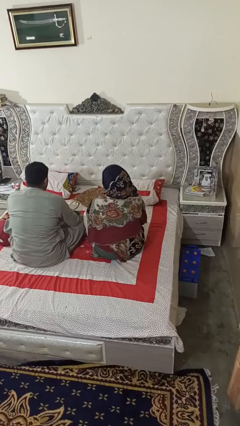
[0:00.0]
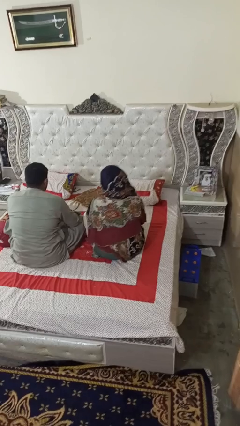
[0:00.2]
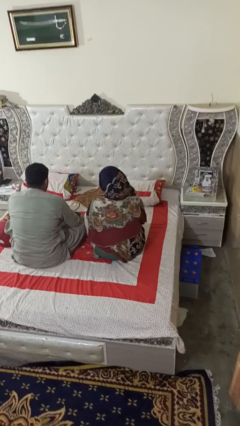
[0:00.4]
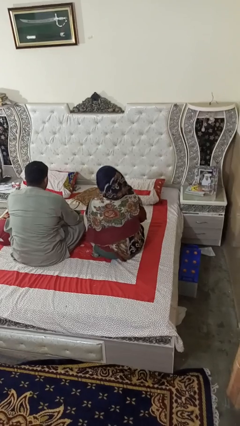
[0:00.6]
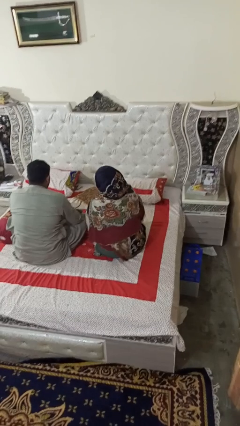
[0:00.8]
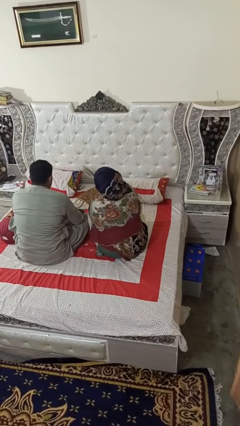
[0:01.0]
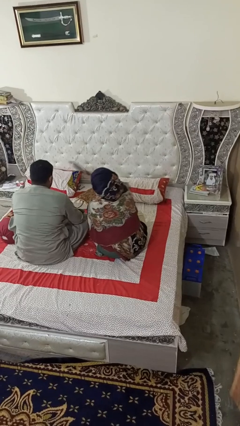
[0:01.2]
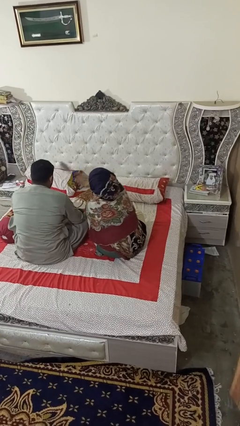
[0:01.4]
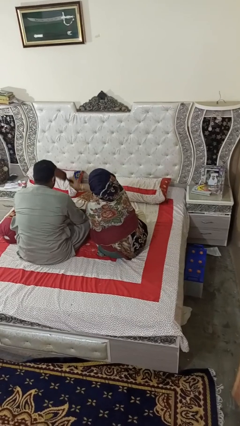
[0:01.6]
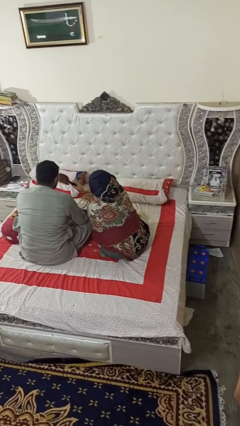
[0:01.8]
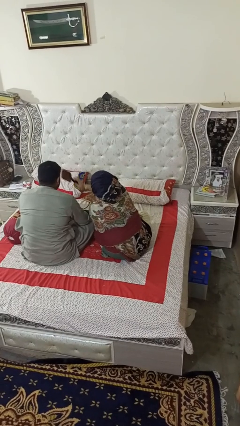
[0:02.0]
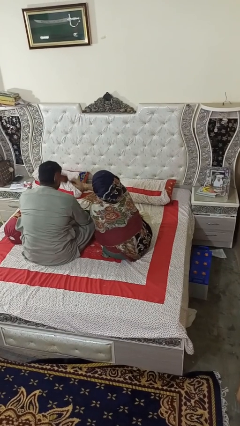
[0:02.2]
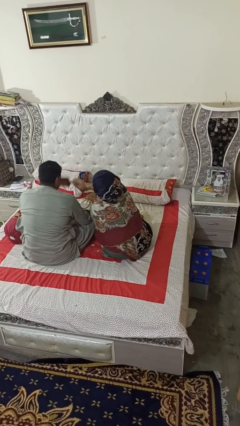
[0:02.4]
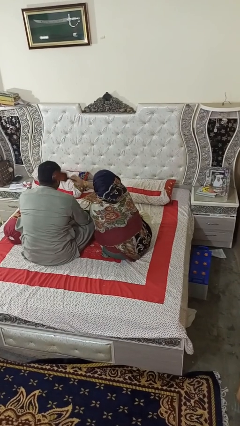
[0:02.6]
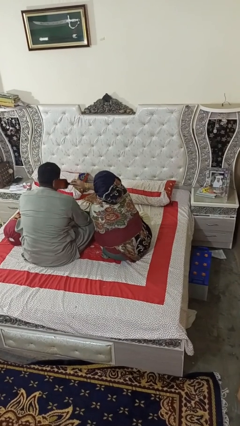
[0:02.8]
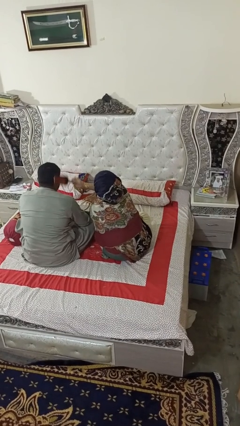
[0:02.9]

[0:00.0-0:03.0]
person brushes hair of person

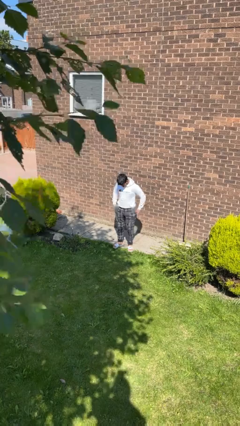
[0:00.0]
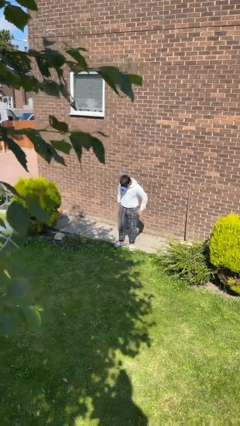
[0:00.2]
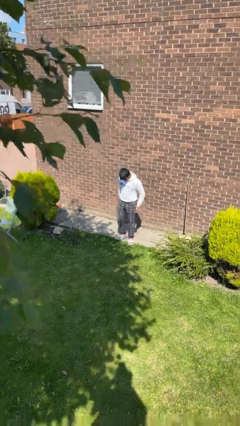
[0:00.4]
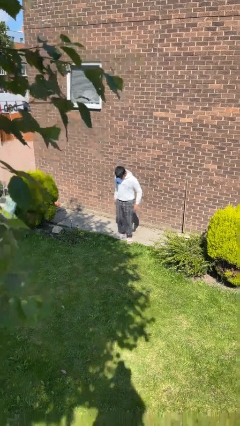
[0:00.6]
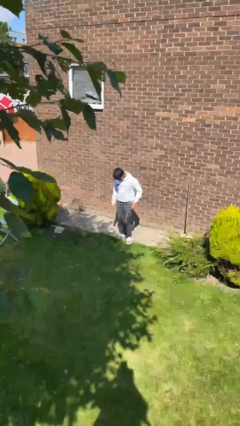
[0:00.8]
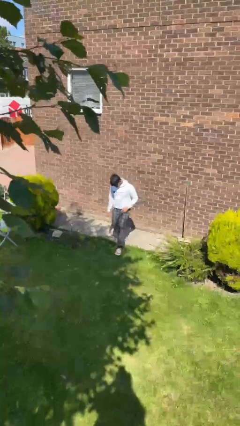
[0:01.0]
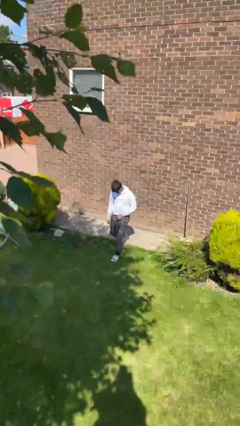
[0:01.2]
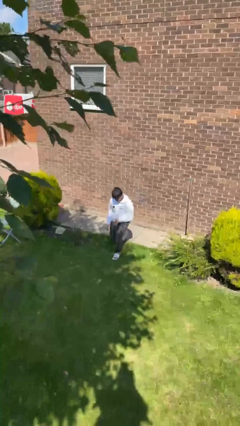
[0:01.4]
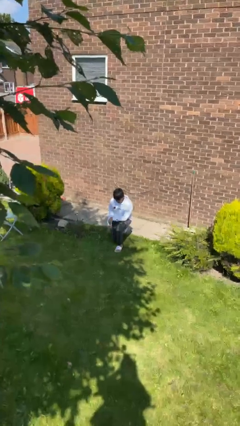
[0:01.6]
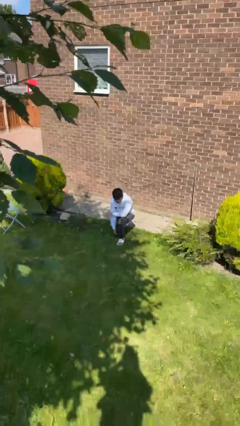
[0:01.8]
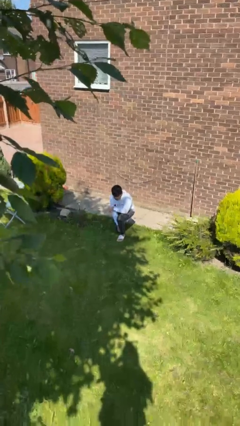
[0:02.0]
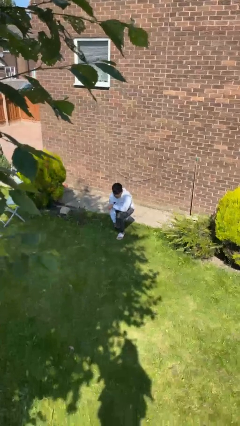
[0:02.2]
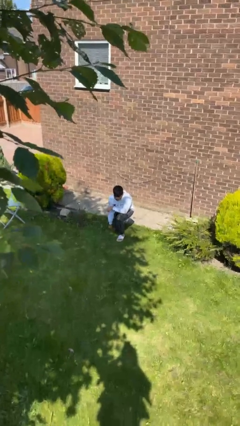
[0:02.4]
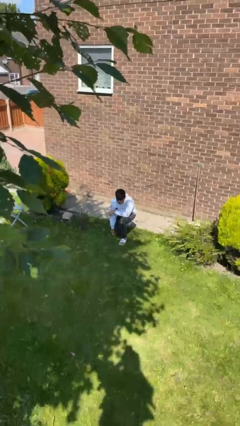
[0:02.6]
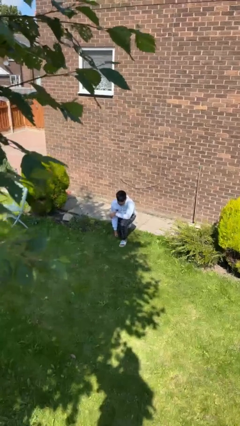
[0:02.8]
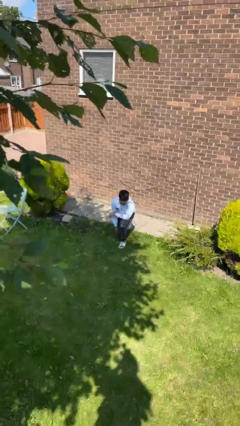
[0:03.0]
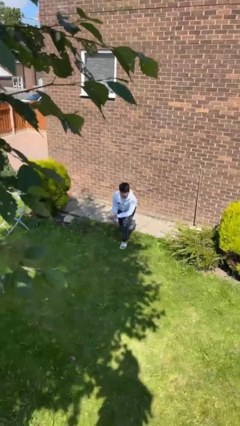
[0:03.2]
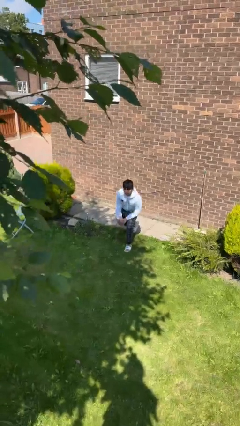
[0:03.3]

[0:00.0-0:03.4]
person kneels

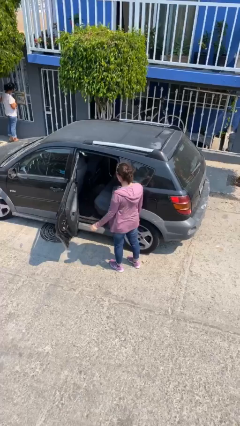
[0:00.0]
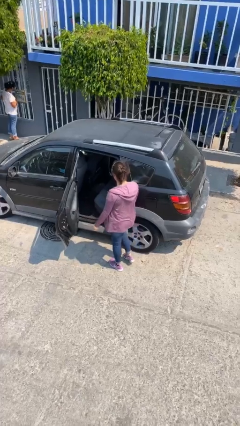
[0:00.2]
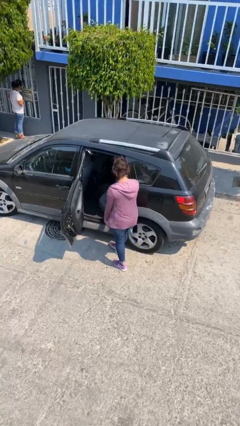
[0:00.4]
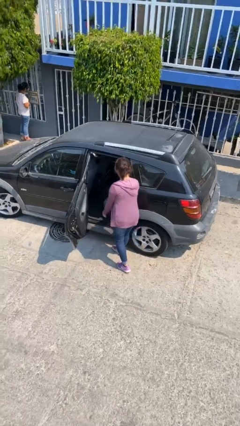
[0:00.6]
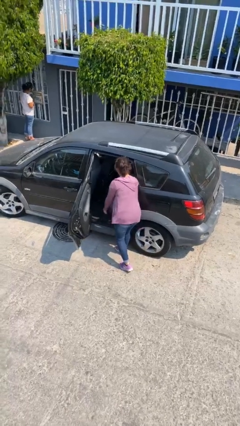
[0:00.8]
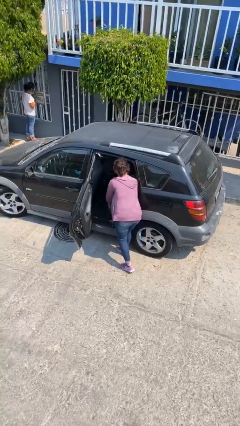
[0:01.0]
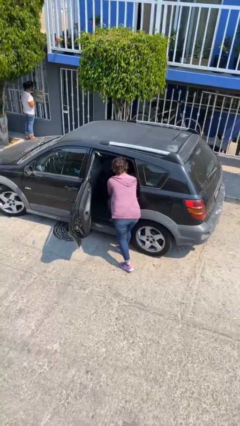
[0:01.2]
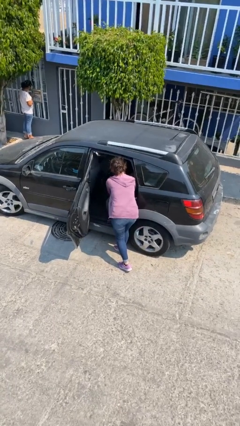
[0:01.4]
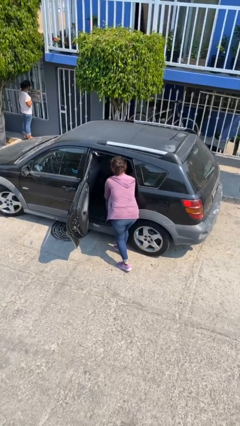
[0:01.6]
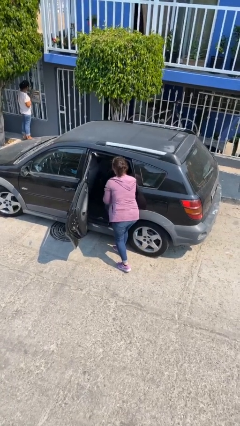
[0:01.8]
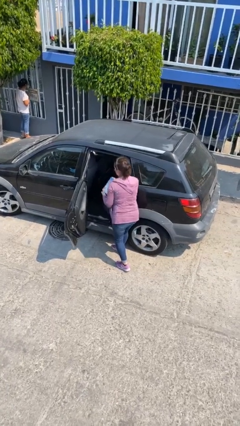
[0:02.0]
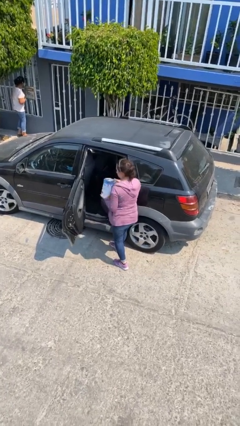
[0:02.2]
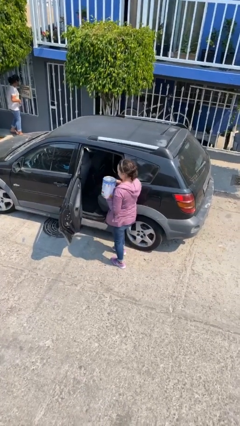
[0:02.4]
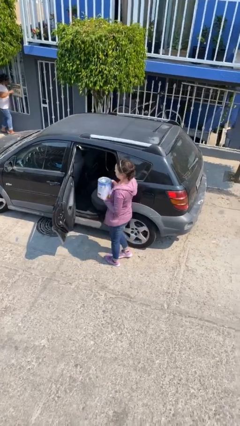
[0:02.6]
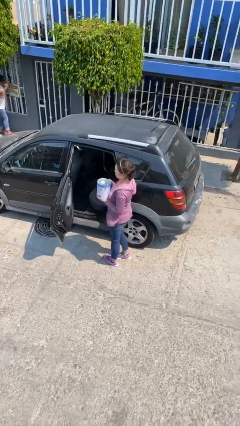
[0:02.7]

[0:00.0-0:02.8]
person unloads car

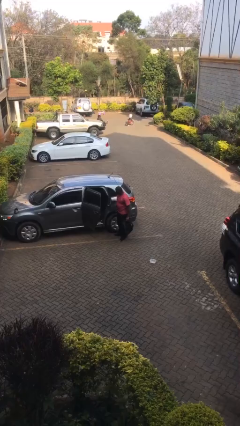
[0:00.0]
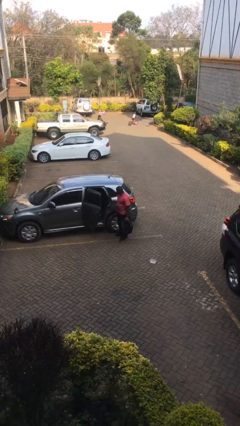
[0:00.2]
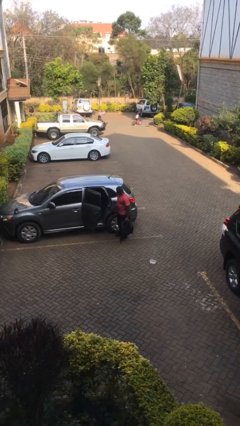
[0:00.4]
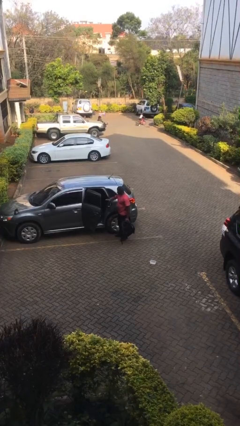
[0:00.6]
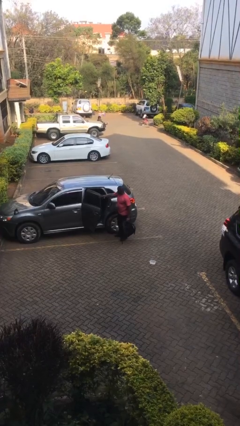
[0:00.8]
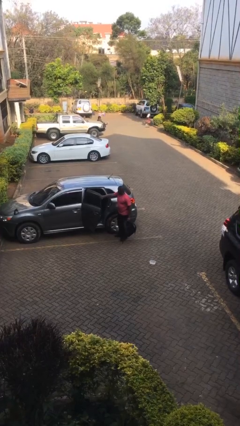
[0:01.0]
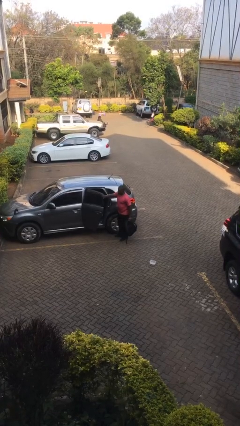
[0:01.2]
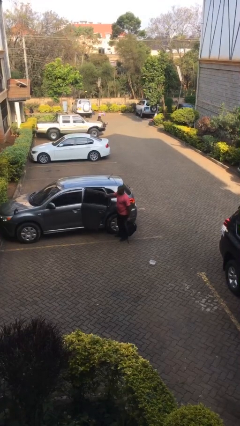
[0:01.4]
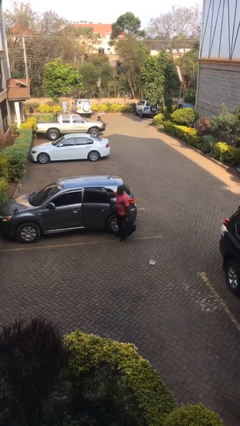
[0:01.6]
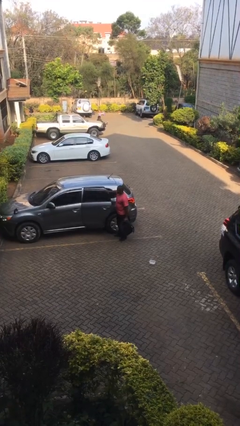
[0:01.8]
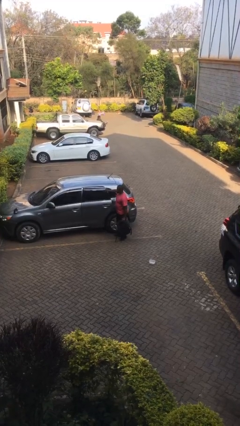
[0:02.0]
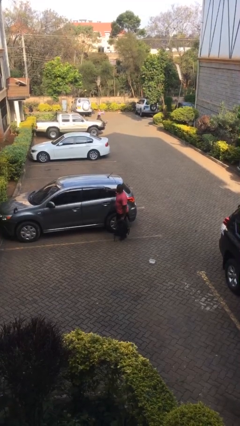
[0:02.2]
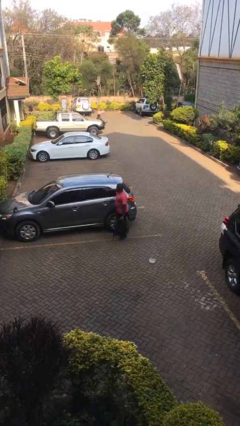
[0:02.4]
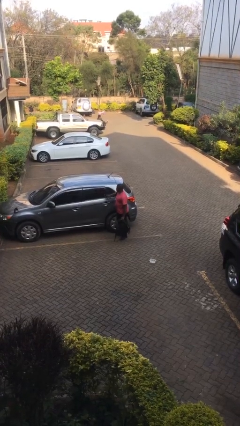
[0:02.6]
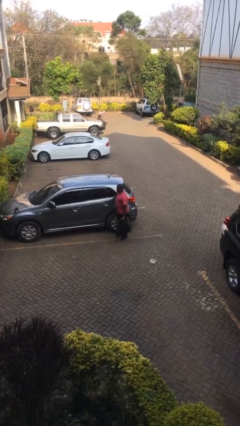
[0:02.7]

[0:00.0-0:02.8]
person closes car door

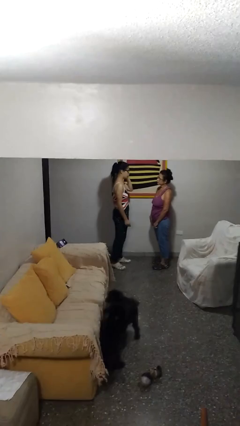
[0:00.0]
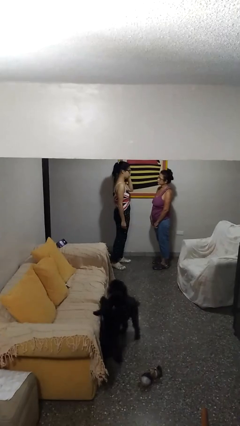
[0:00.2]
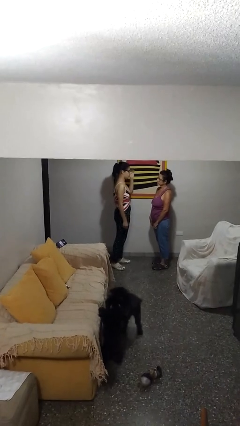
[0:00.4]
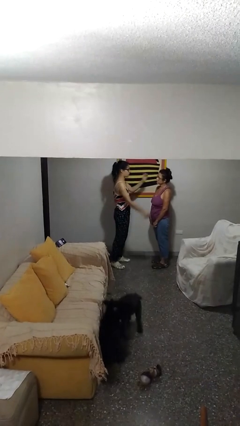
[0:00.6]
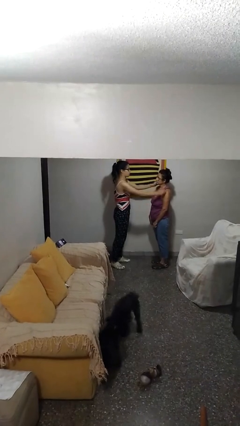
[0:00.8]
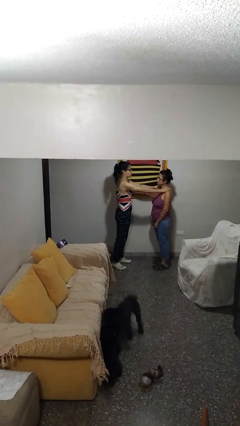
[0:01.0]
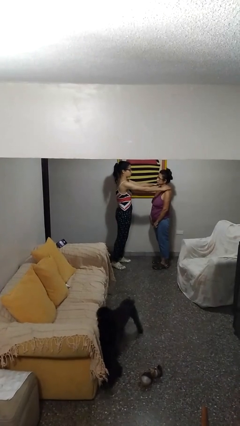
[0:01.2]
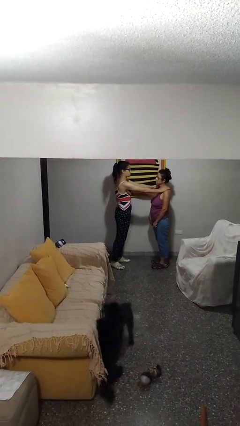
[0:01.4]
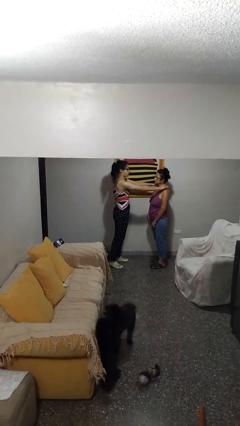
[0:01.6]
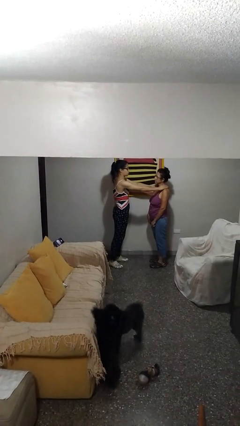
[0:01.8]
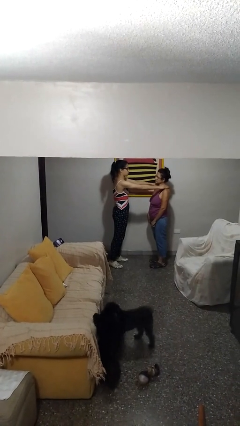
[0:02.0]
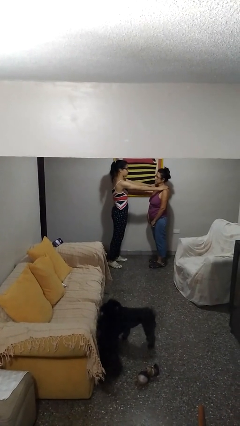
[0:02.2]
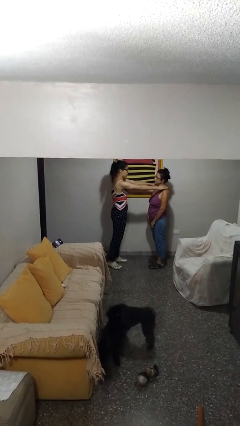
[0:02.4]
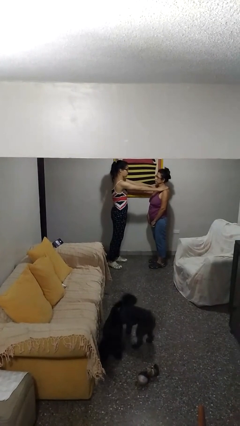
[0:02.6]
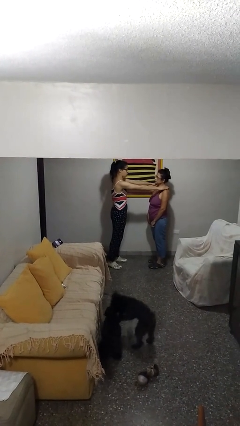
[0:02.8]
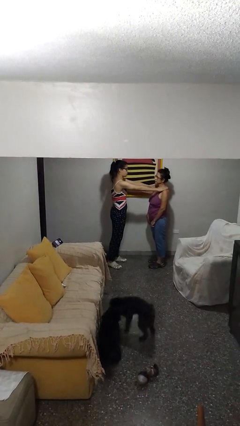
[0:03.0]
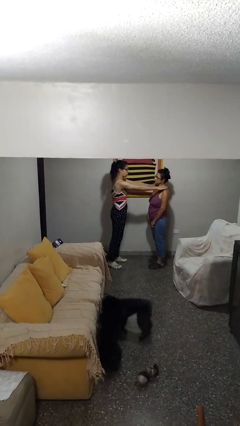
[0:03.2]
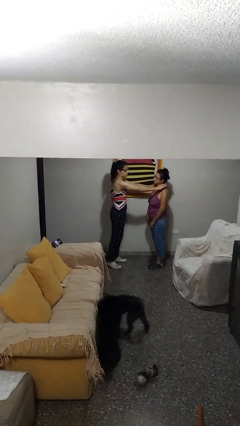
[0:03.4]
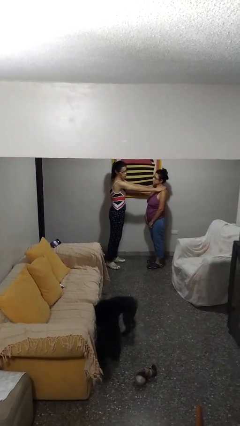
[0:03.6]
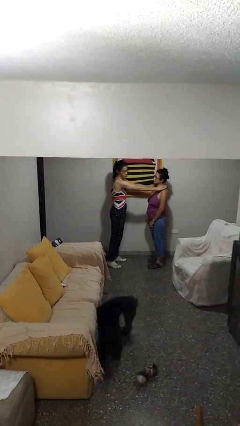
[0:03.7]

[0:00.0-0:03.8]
person pounds shoulders of person

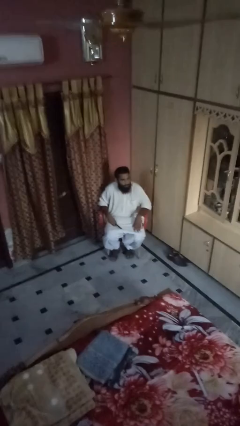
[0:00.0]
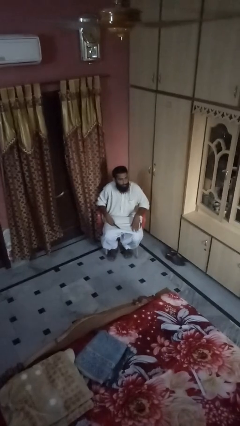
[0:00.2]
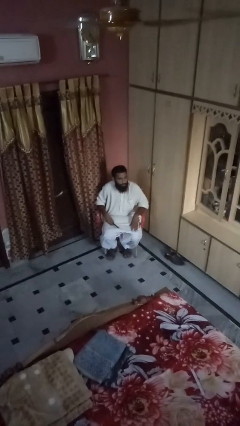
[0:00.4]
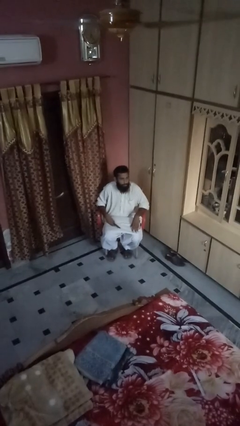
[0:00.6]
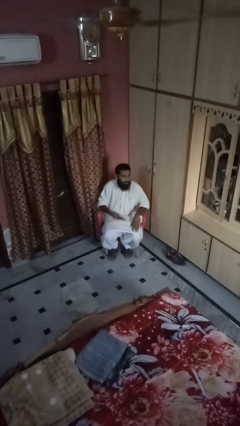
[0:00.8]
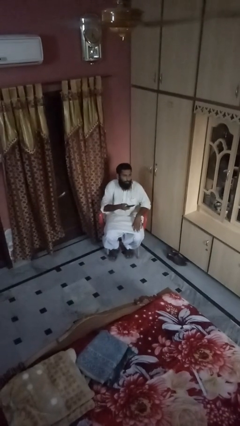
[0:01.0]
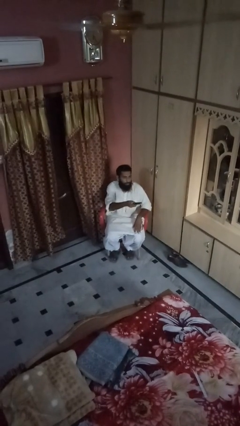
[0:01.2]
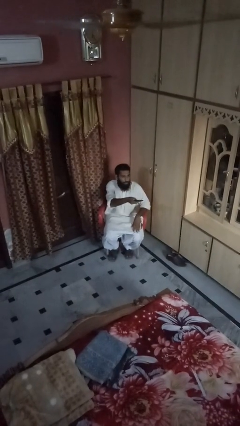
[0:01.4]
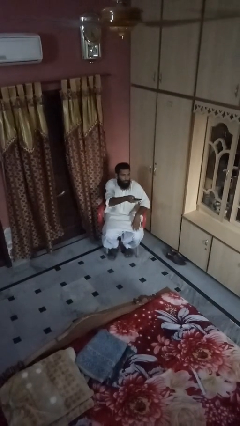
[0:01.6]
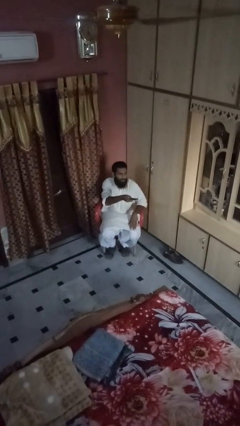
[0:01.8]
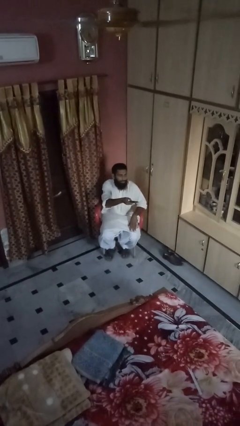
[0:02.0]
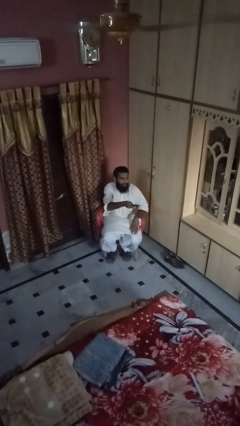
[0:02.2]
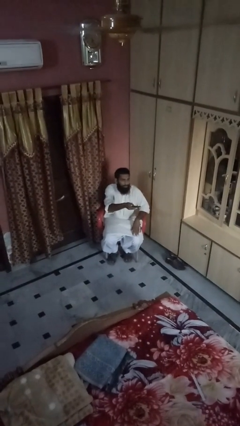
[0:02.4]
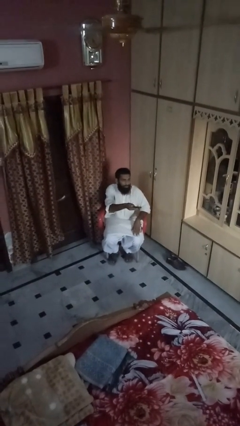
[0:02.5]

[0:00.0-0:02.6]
person uses television remote
